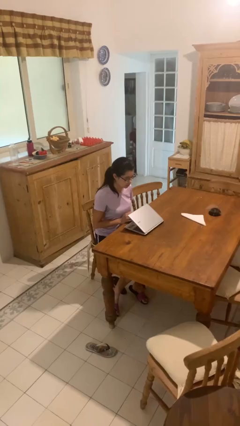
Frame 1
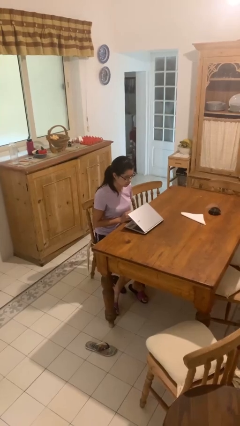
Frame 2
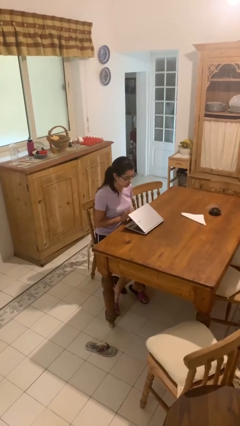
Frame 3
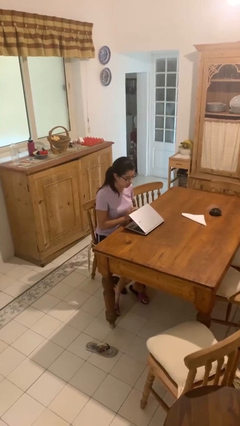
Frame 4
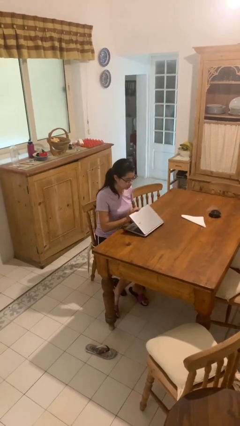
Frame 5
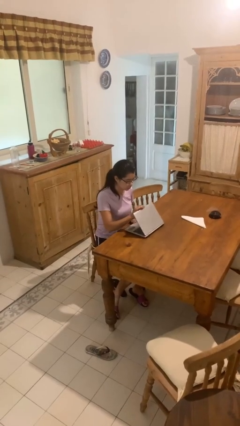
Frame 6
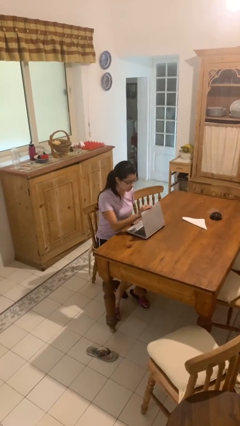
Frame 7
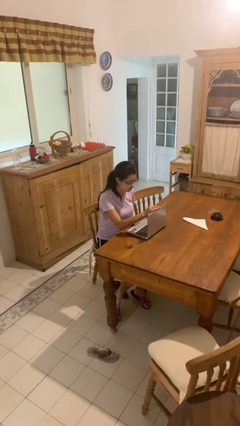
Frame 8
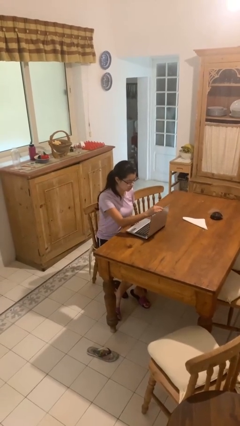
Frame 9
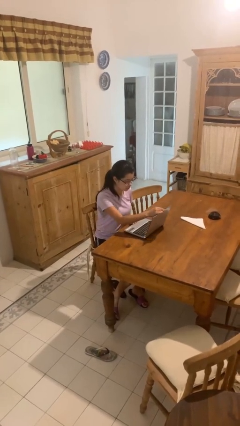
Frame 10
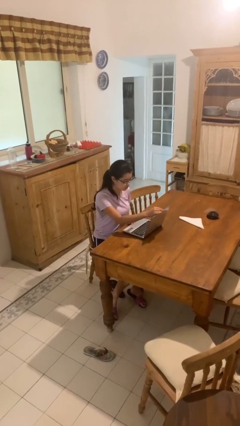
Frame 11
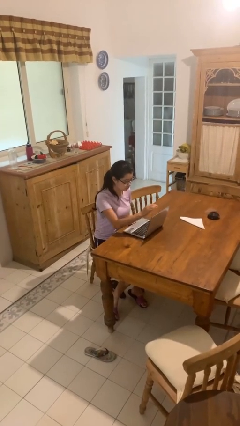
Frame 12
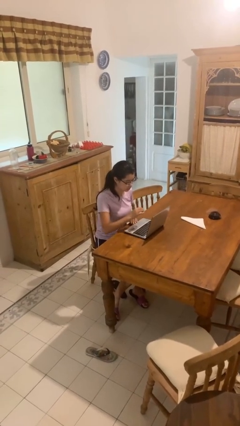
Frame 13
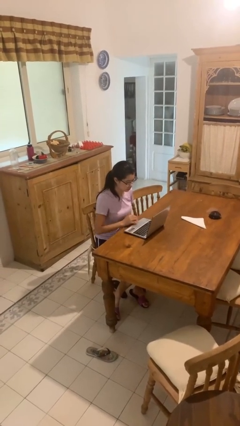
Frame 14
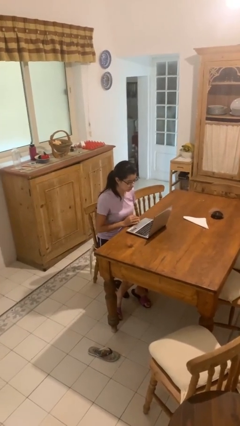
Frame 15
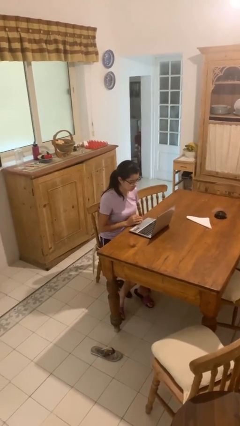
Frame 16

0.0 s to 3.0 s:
person opens laptop

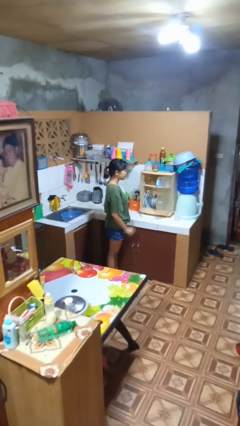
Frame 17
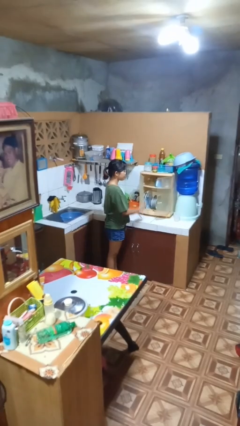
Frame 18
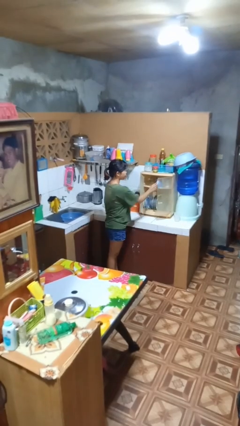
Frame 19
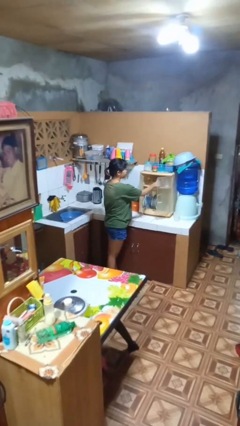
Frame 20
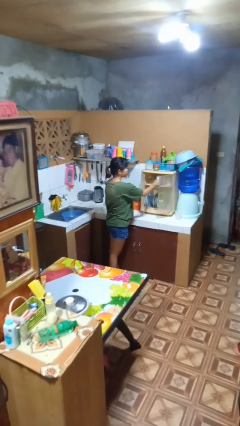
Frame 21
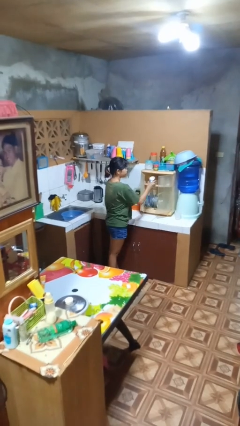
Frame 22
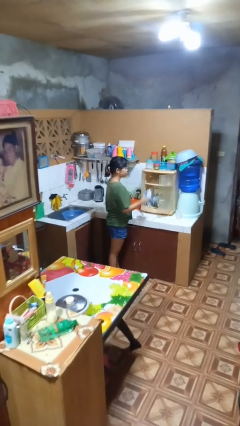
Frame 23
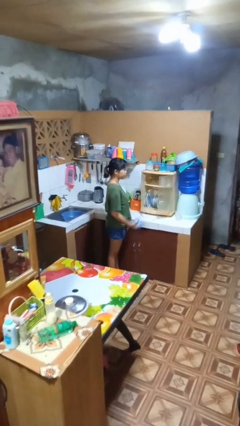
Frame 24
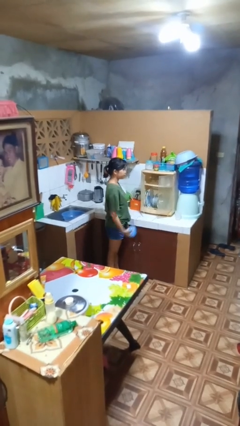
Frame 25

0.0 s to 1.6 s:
person takes object from cabinet

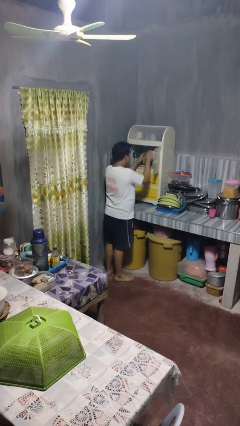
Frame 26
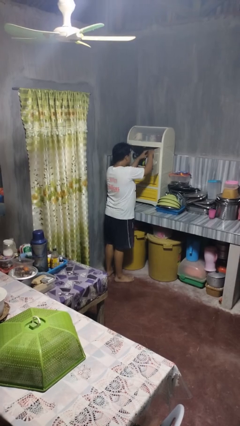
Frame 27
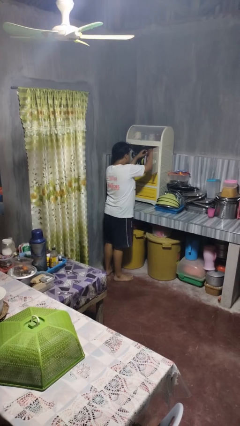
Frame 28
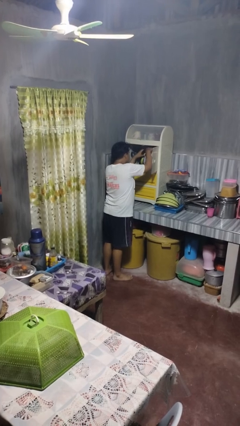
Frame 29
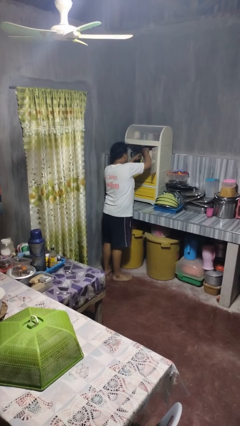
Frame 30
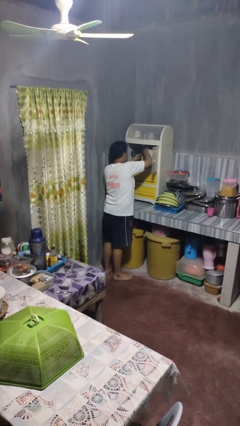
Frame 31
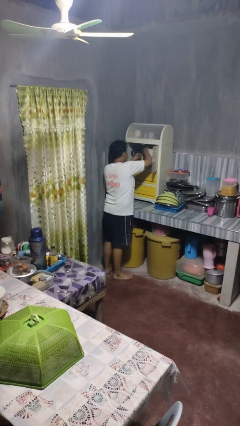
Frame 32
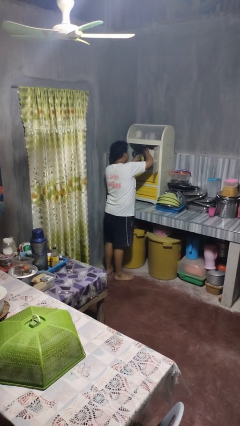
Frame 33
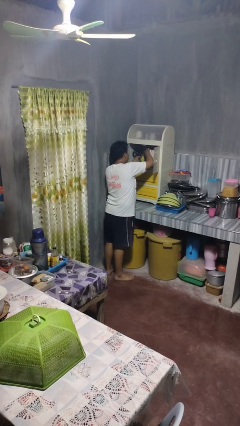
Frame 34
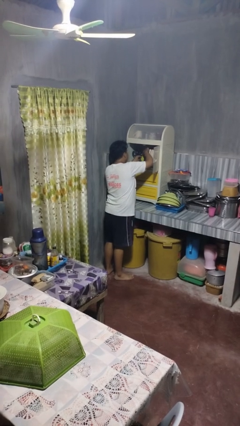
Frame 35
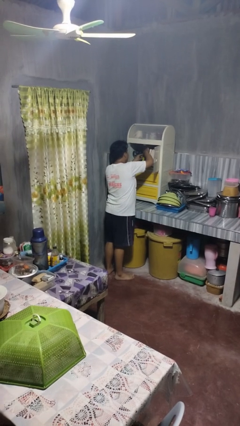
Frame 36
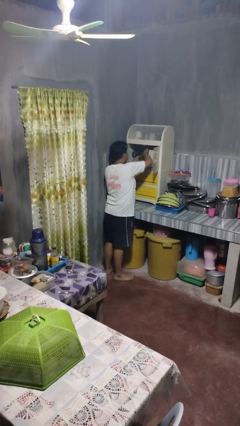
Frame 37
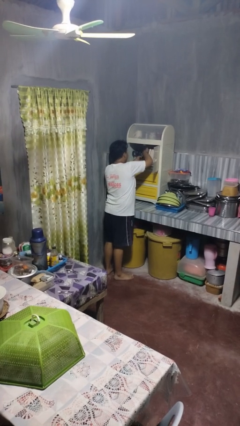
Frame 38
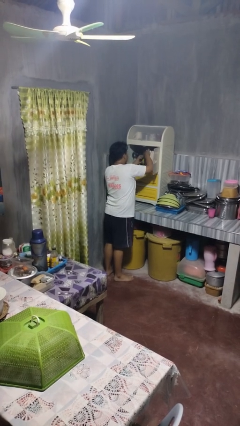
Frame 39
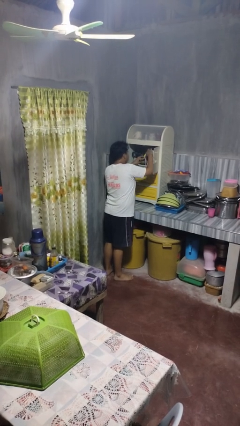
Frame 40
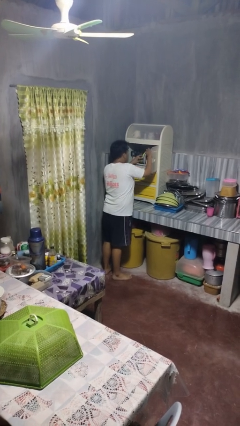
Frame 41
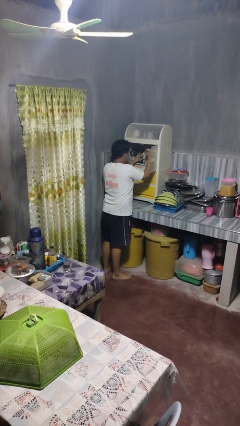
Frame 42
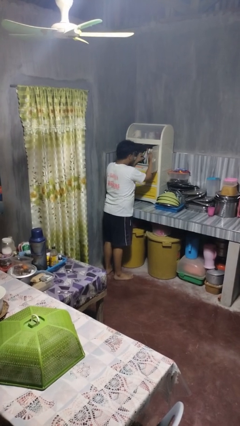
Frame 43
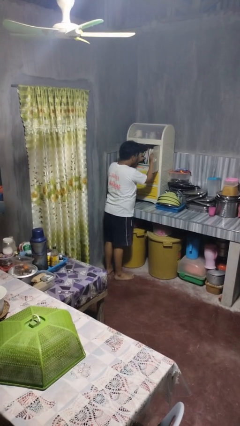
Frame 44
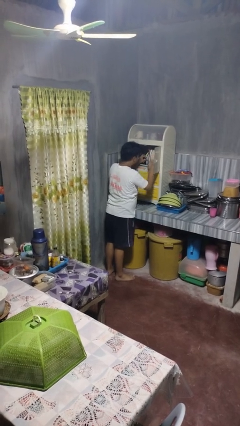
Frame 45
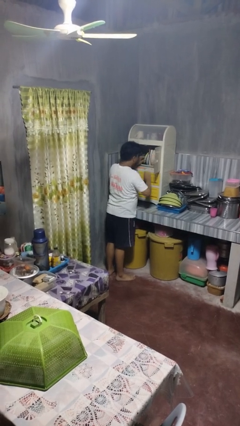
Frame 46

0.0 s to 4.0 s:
person searches in cabinet

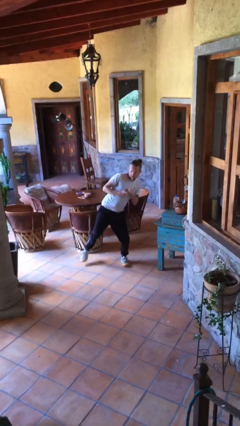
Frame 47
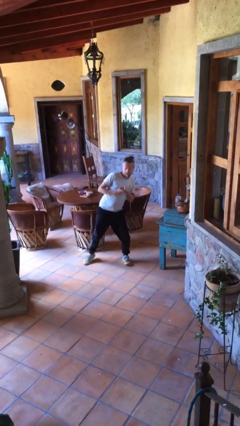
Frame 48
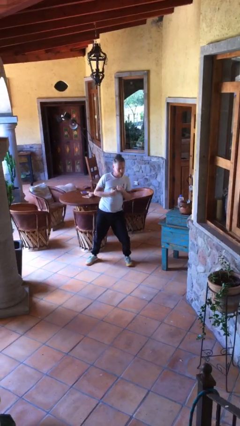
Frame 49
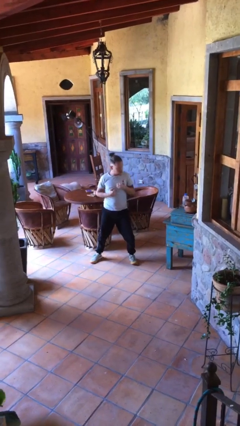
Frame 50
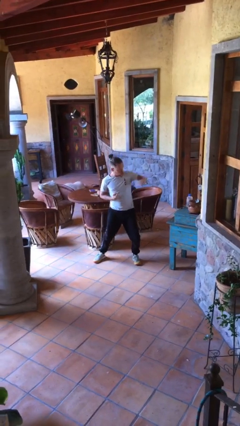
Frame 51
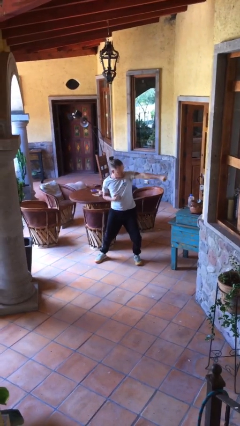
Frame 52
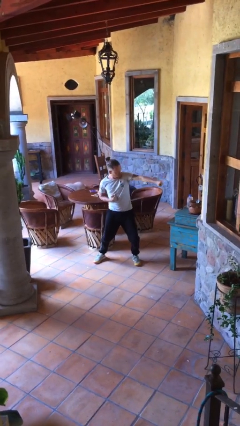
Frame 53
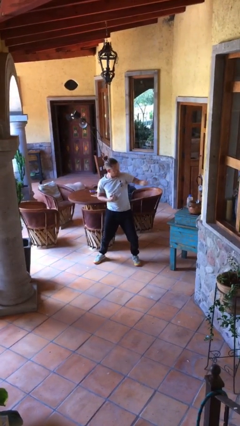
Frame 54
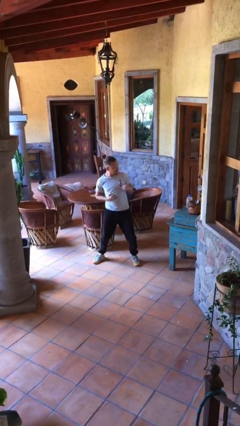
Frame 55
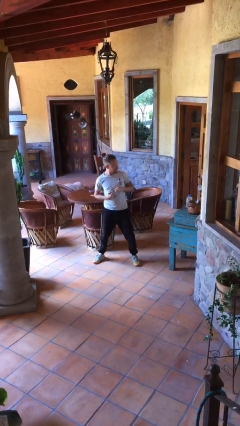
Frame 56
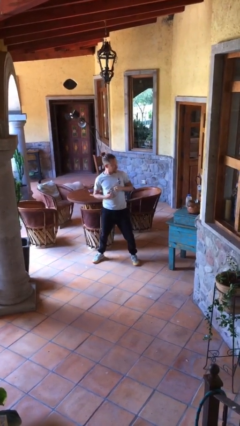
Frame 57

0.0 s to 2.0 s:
person karate chop

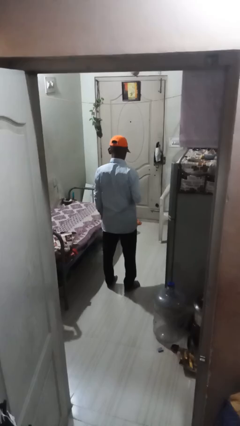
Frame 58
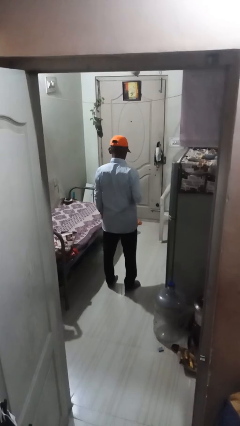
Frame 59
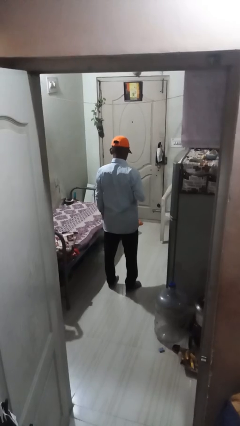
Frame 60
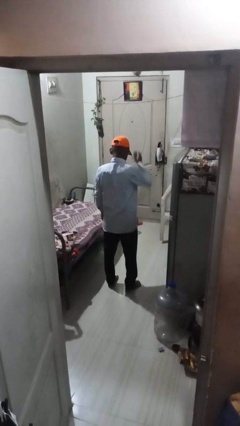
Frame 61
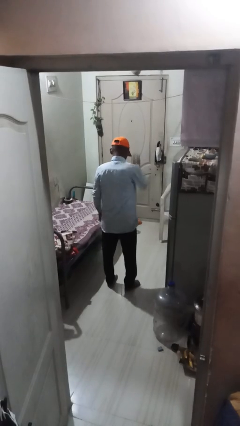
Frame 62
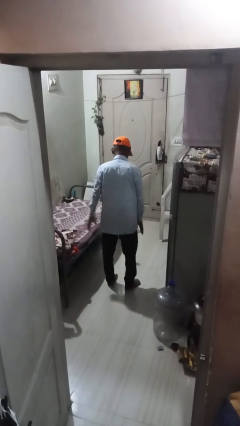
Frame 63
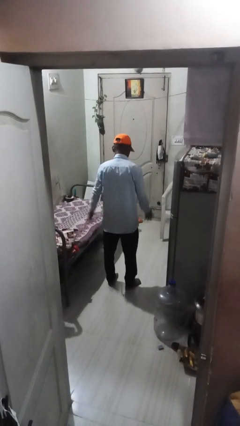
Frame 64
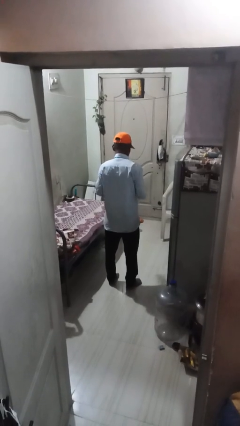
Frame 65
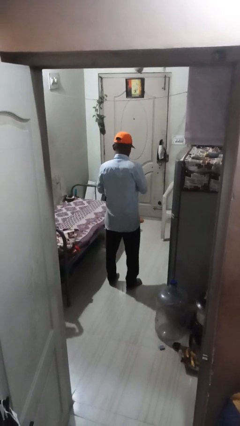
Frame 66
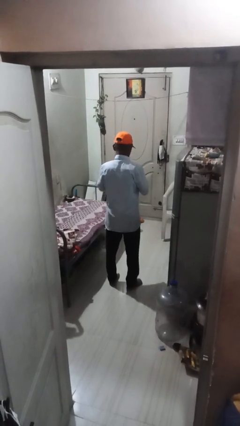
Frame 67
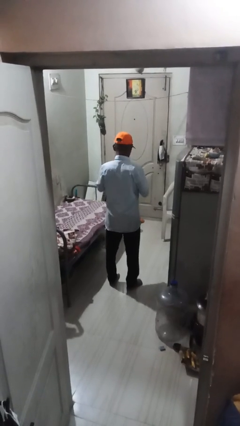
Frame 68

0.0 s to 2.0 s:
person bounces ball on floor

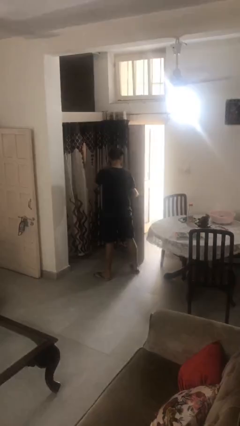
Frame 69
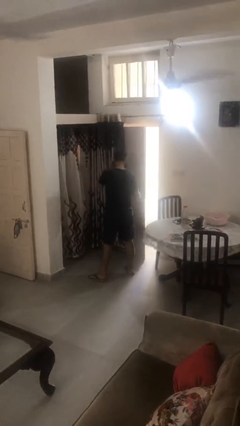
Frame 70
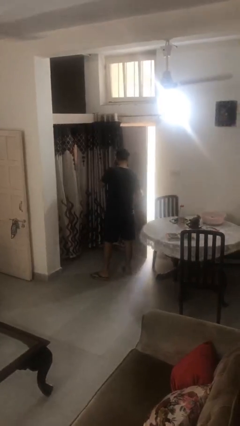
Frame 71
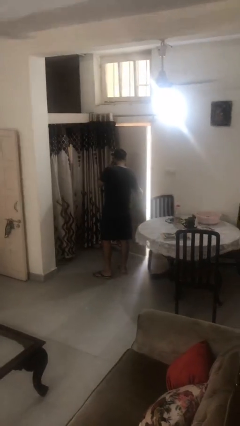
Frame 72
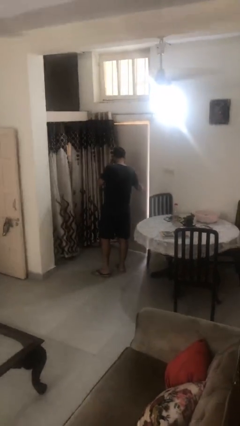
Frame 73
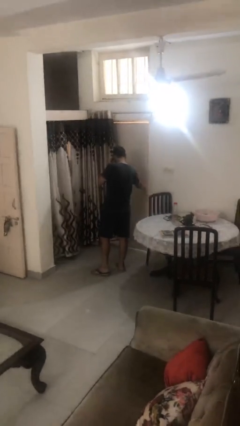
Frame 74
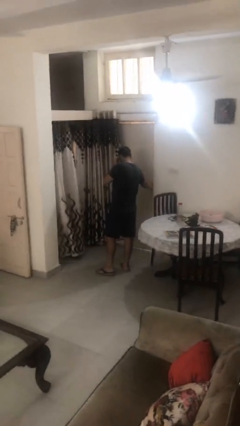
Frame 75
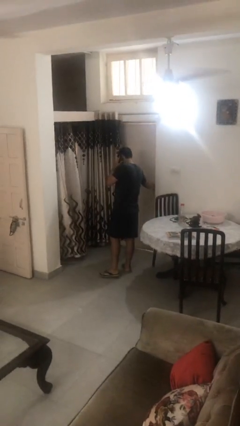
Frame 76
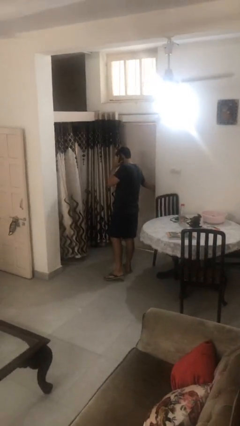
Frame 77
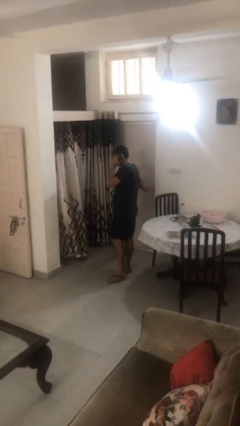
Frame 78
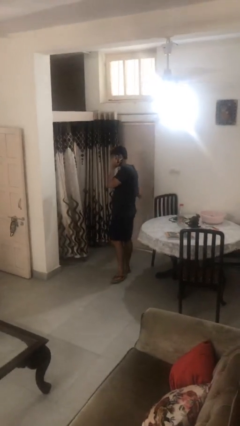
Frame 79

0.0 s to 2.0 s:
person closes facility door

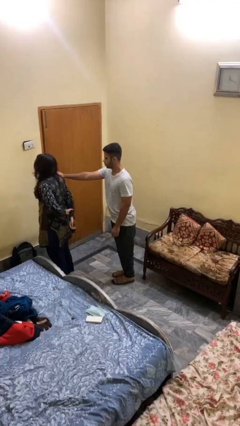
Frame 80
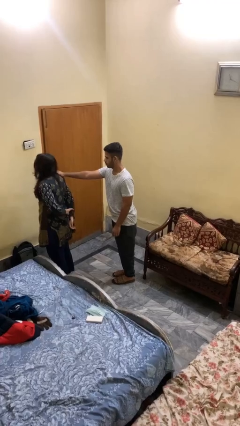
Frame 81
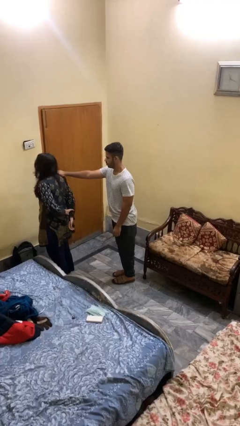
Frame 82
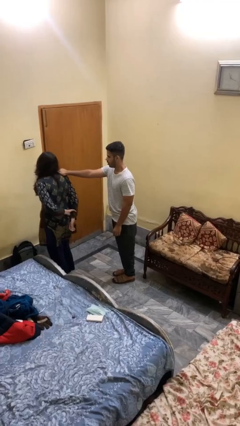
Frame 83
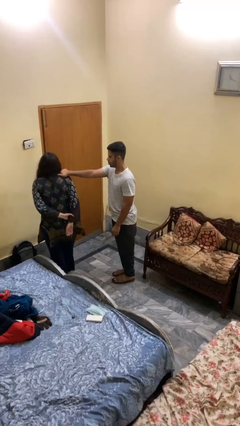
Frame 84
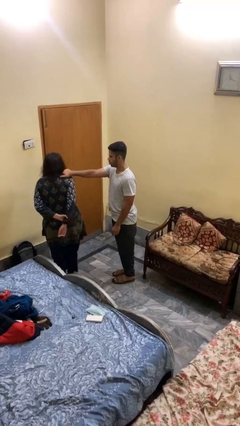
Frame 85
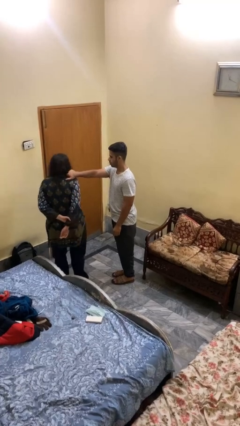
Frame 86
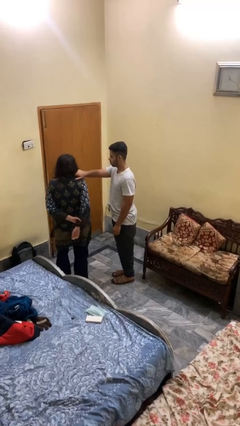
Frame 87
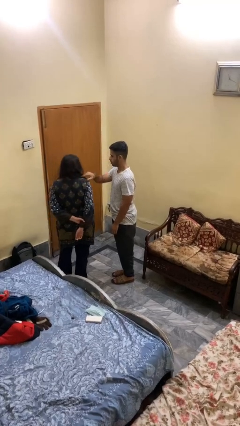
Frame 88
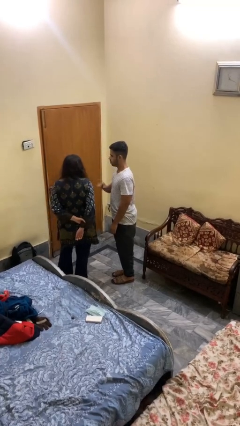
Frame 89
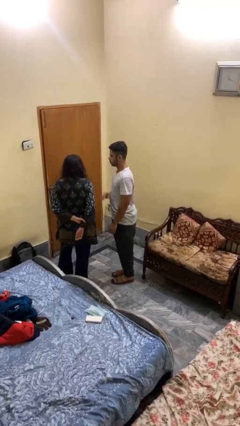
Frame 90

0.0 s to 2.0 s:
person spins person around
